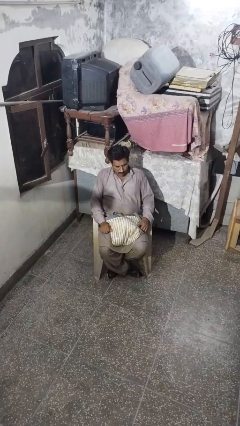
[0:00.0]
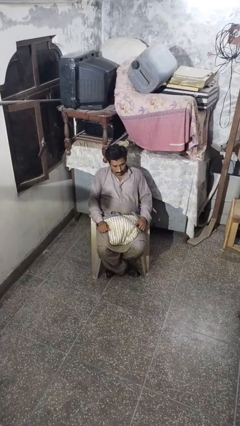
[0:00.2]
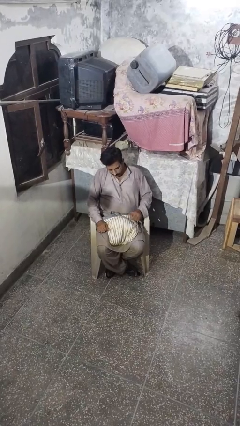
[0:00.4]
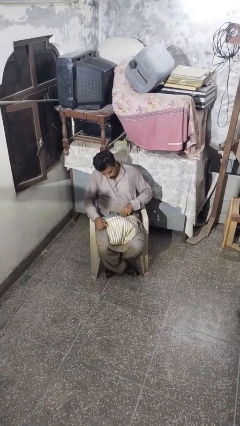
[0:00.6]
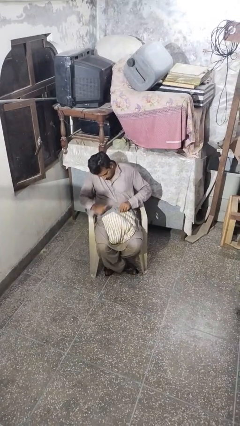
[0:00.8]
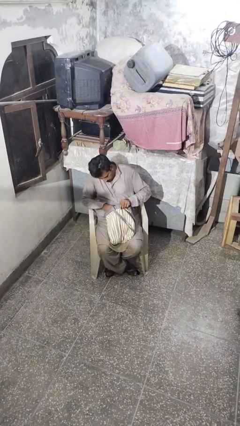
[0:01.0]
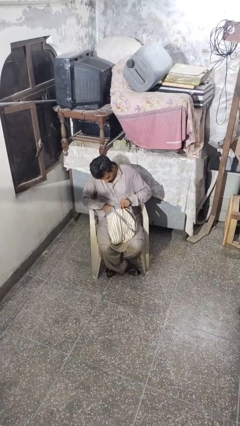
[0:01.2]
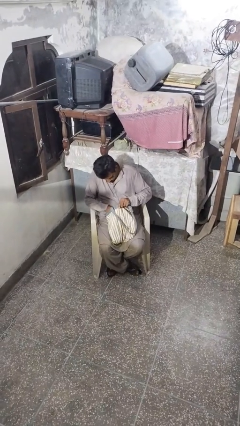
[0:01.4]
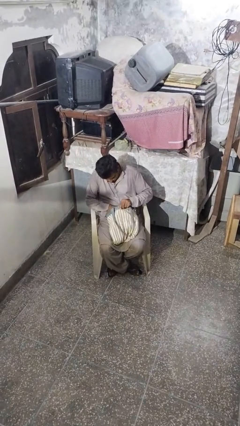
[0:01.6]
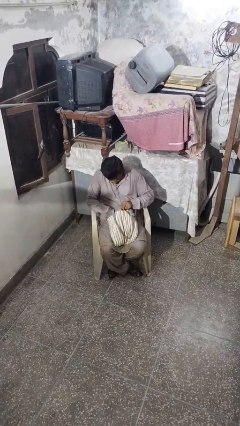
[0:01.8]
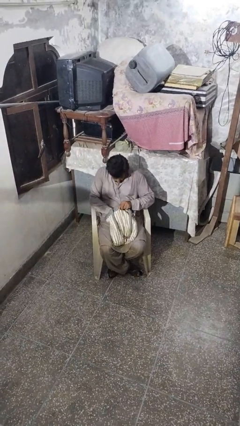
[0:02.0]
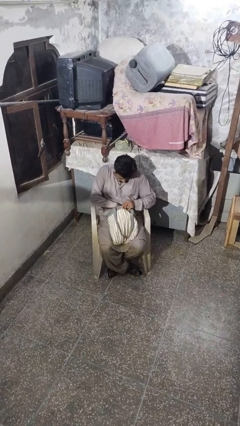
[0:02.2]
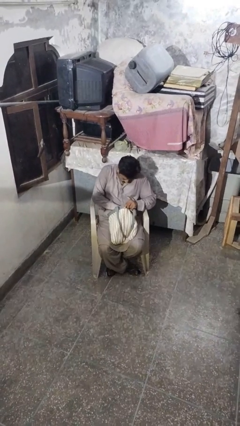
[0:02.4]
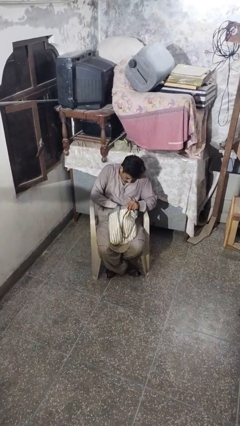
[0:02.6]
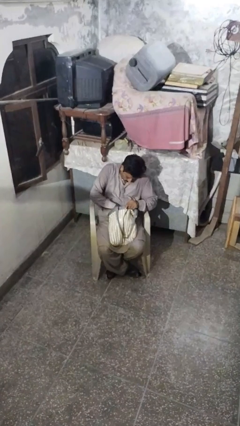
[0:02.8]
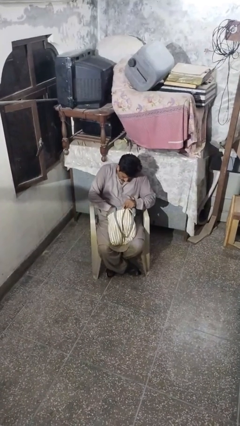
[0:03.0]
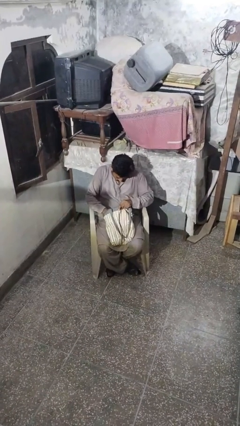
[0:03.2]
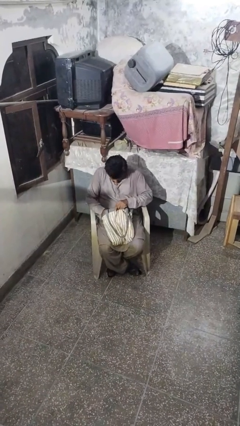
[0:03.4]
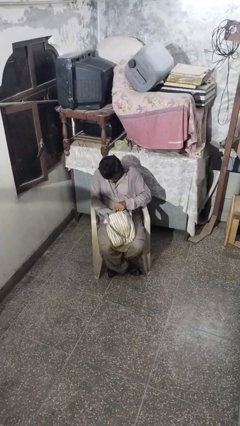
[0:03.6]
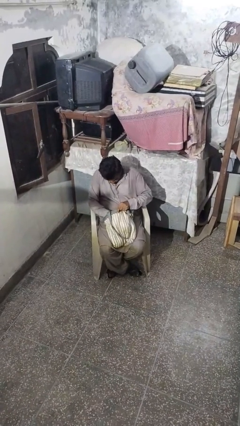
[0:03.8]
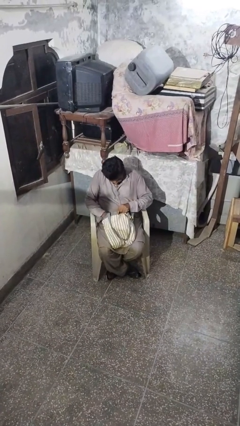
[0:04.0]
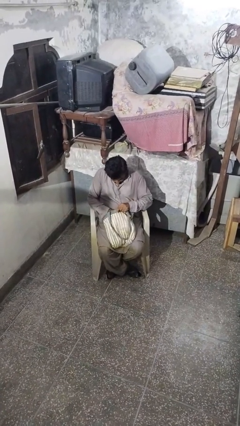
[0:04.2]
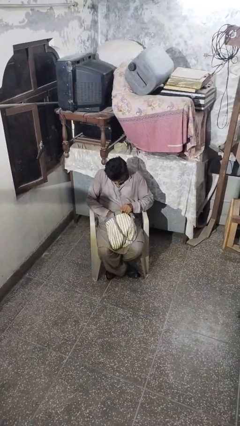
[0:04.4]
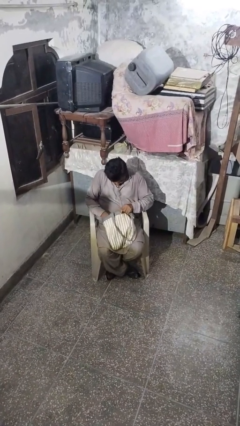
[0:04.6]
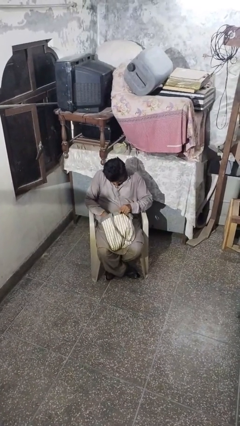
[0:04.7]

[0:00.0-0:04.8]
person searches in backpack

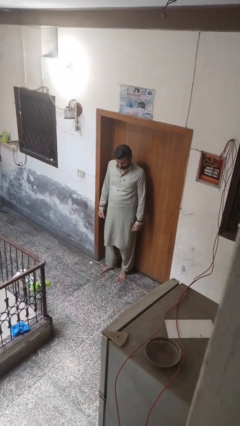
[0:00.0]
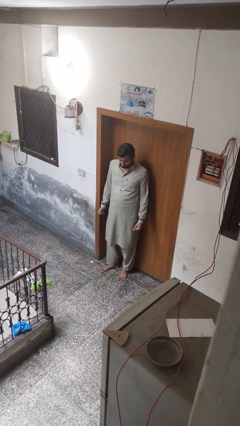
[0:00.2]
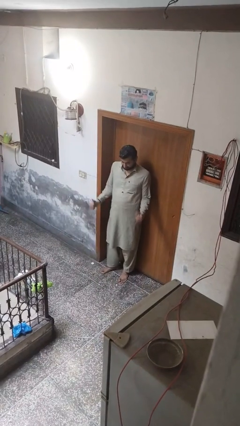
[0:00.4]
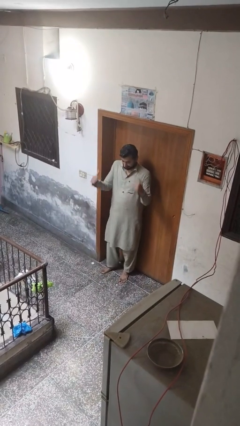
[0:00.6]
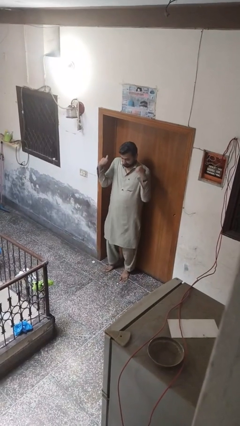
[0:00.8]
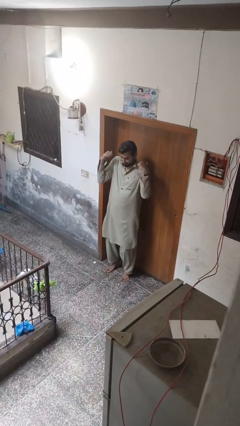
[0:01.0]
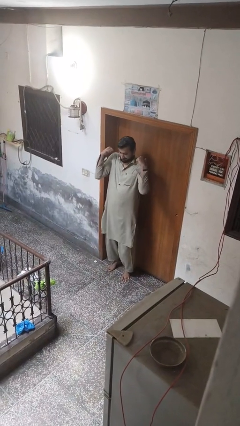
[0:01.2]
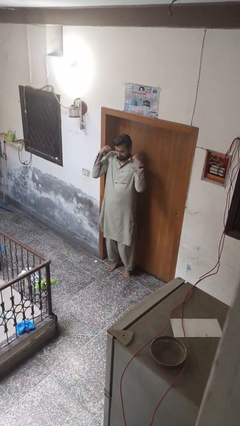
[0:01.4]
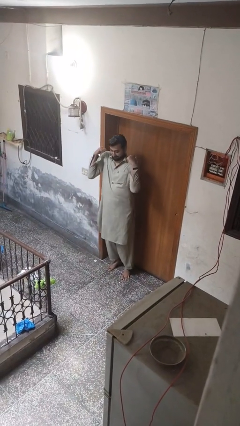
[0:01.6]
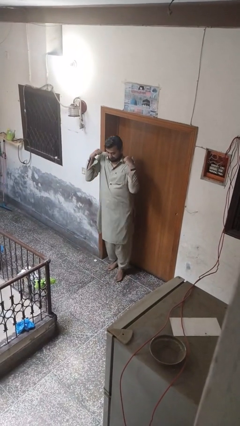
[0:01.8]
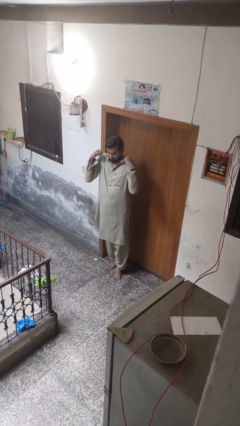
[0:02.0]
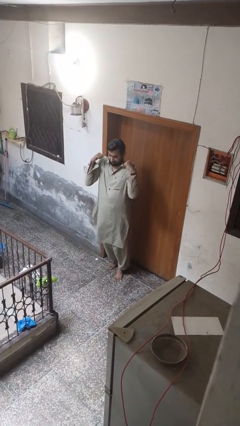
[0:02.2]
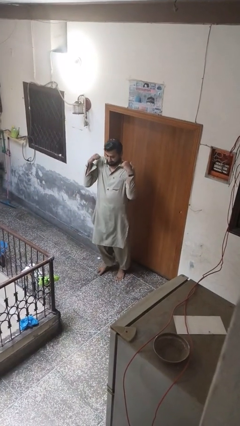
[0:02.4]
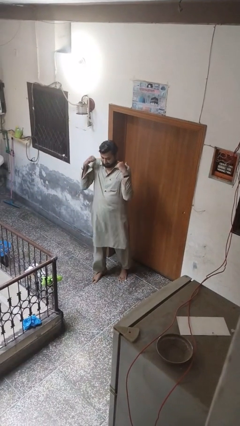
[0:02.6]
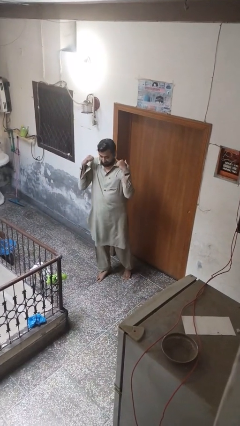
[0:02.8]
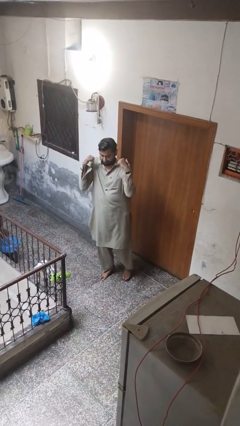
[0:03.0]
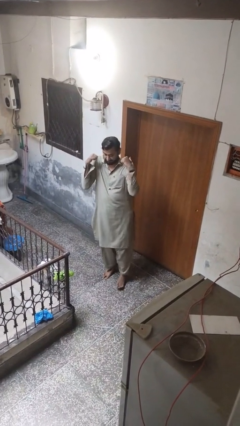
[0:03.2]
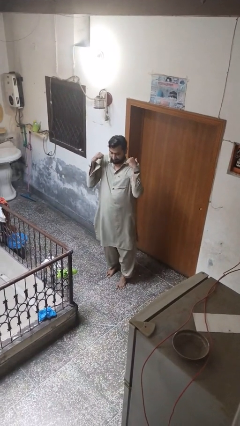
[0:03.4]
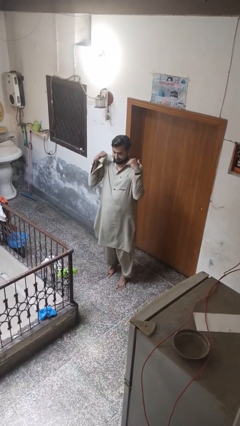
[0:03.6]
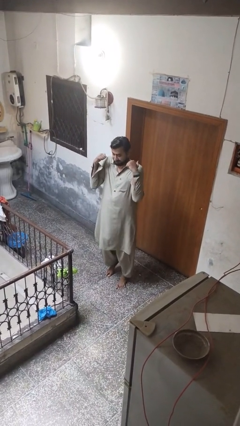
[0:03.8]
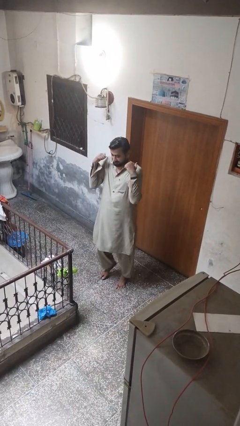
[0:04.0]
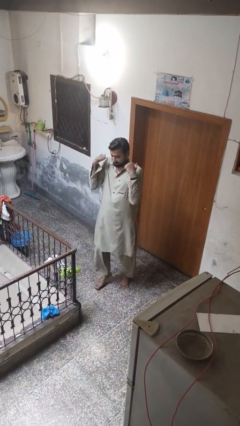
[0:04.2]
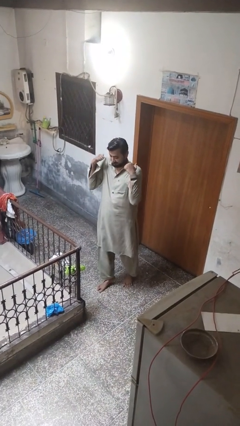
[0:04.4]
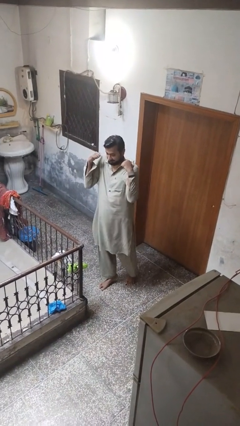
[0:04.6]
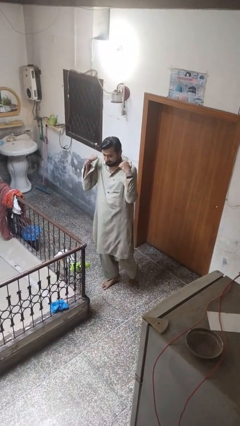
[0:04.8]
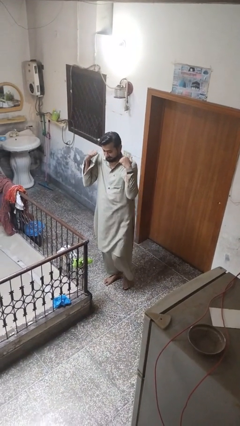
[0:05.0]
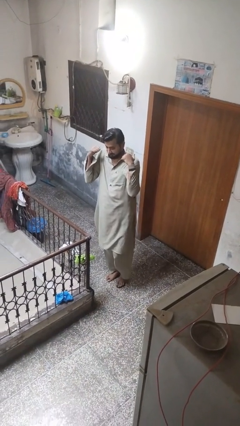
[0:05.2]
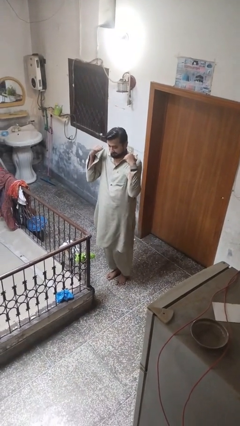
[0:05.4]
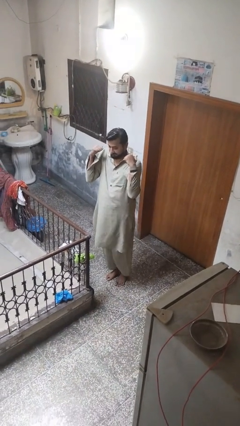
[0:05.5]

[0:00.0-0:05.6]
person walks tiptoe

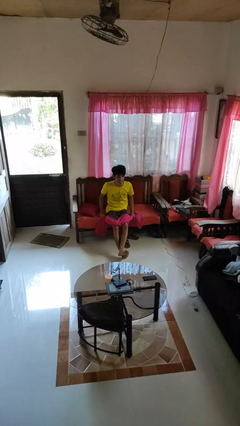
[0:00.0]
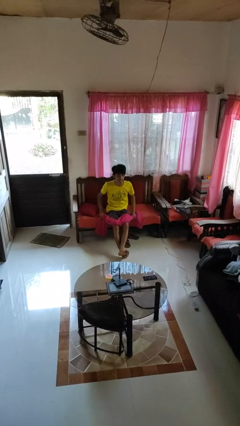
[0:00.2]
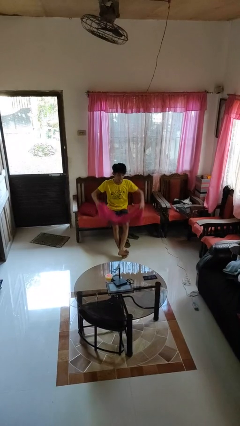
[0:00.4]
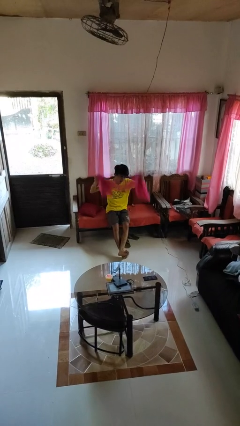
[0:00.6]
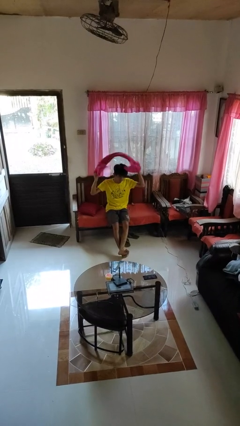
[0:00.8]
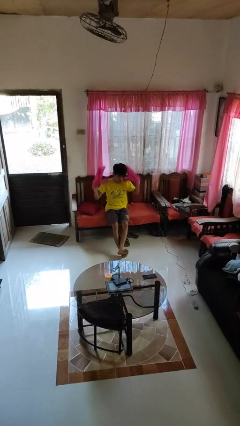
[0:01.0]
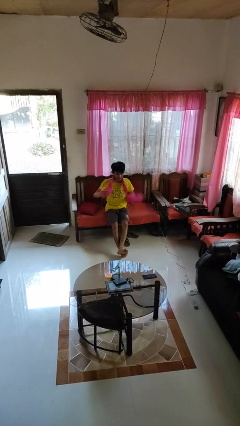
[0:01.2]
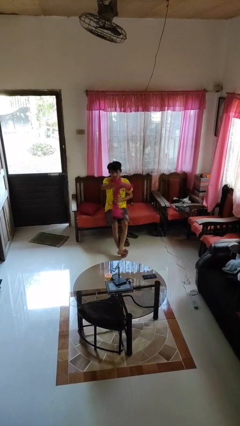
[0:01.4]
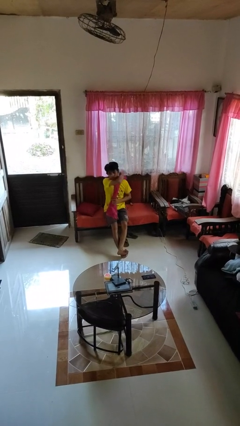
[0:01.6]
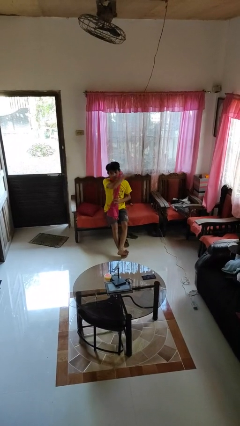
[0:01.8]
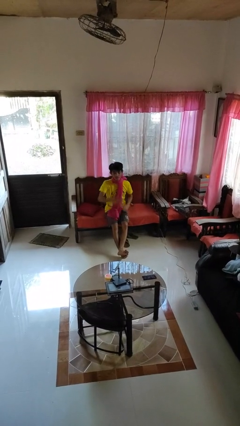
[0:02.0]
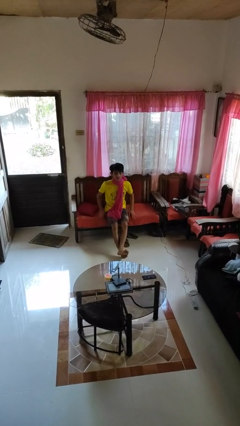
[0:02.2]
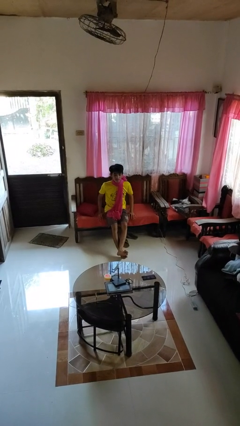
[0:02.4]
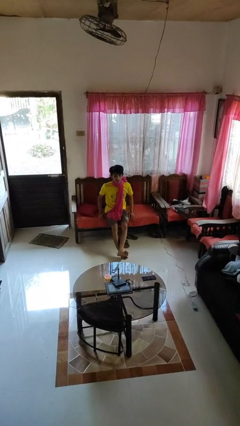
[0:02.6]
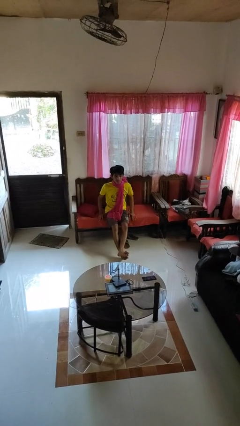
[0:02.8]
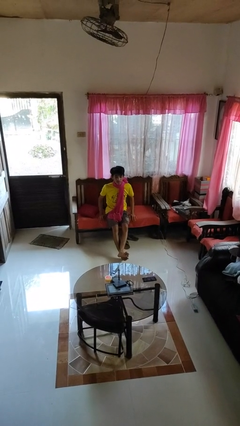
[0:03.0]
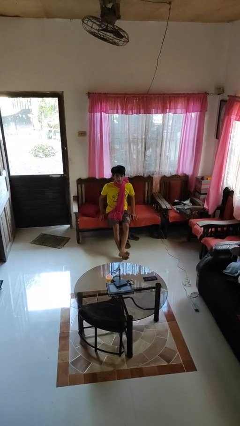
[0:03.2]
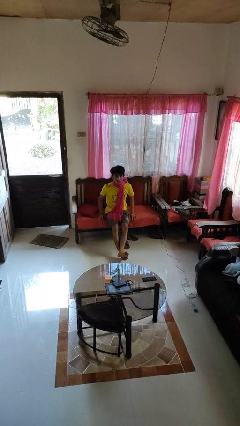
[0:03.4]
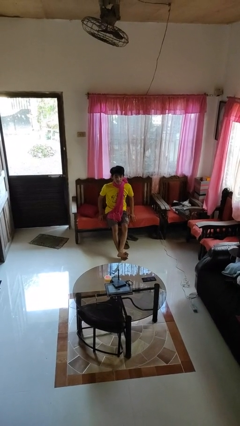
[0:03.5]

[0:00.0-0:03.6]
person puts on scarf

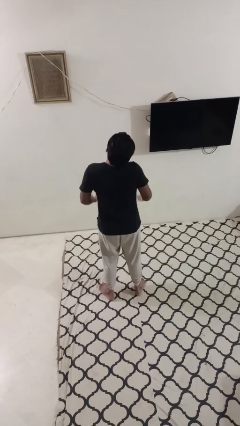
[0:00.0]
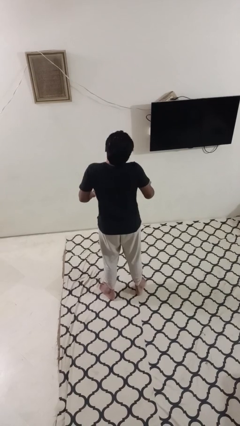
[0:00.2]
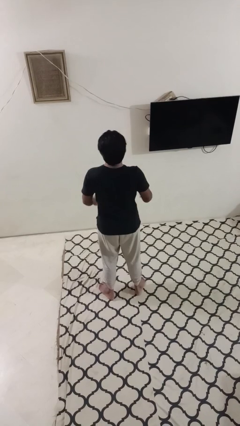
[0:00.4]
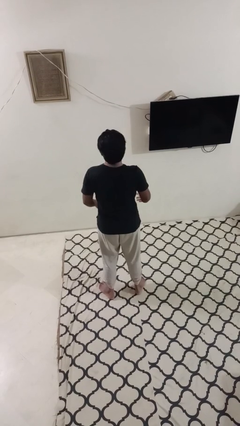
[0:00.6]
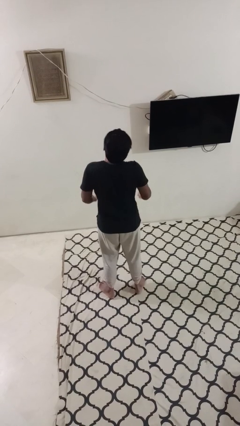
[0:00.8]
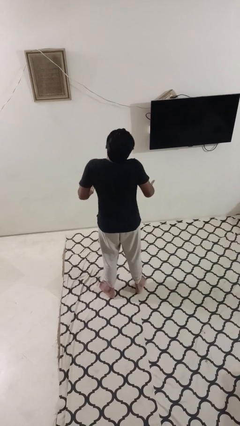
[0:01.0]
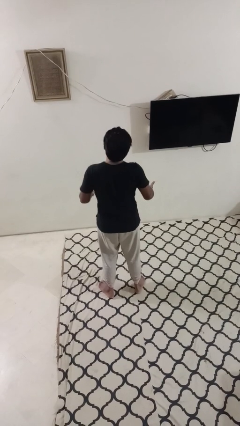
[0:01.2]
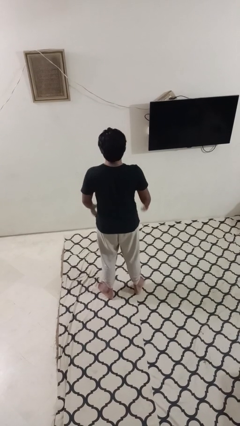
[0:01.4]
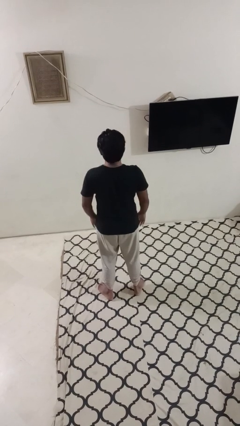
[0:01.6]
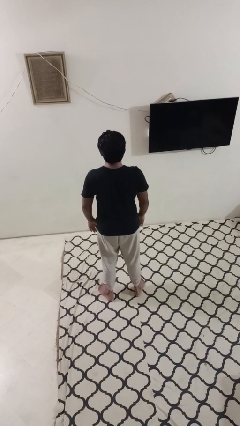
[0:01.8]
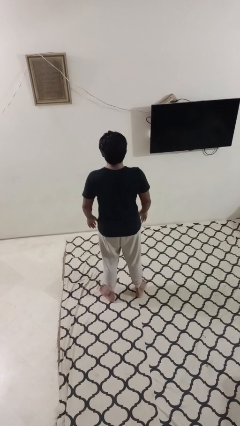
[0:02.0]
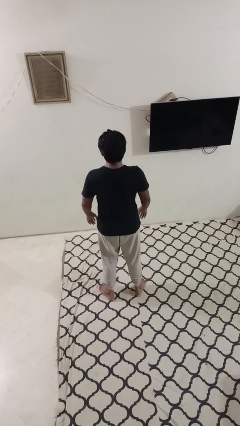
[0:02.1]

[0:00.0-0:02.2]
person shrugs

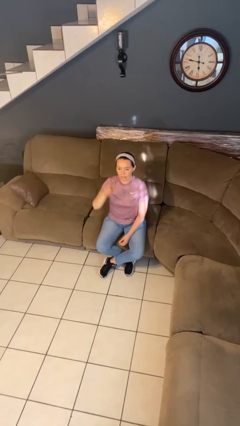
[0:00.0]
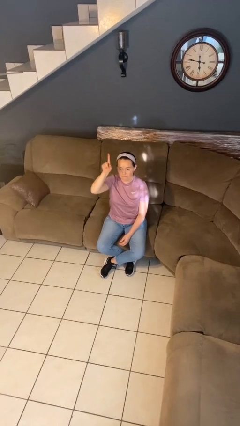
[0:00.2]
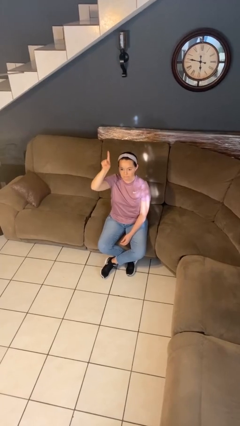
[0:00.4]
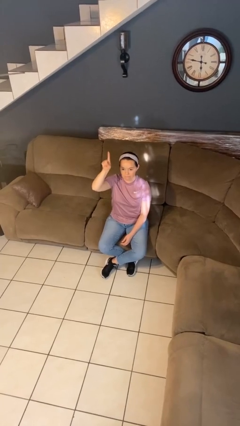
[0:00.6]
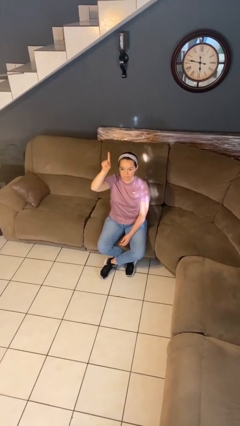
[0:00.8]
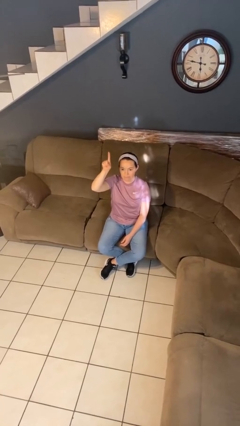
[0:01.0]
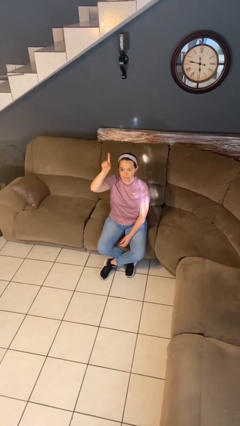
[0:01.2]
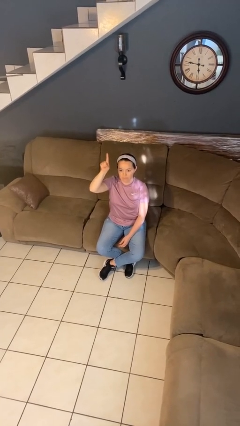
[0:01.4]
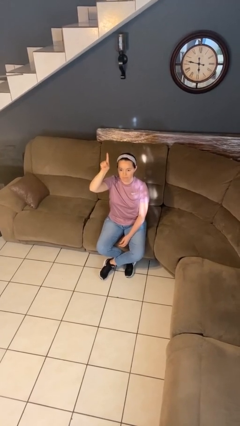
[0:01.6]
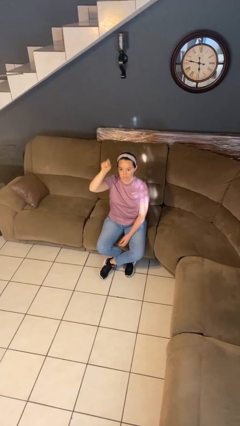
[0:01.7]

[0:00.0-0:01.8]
person gestures number one
